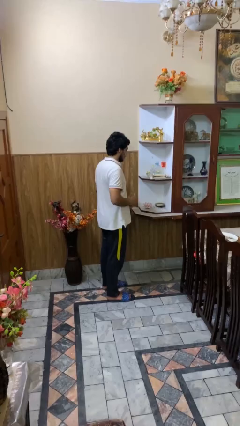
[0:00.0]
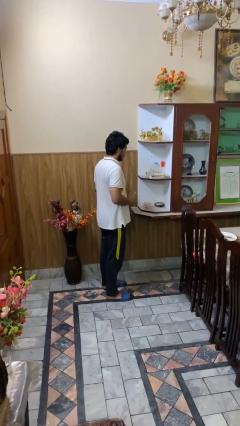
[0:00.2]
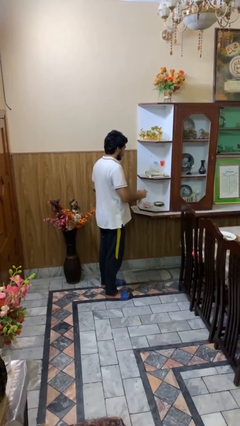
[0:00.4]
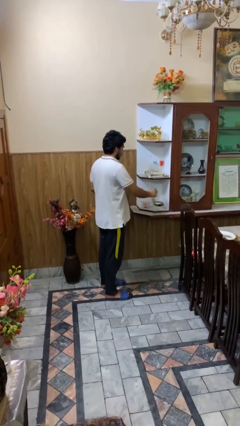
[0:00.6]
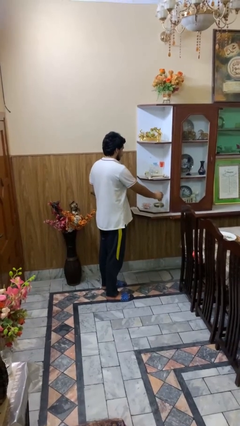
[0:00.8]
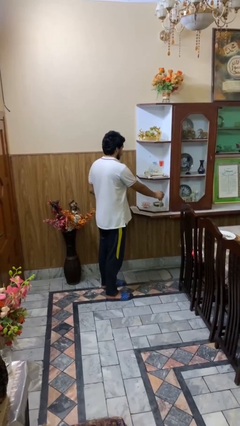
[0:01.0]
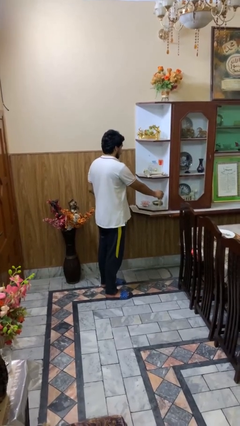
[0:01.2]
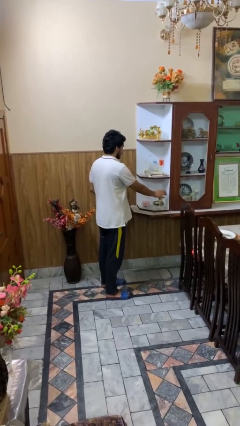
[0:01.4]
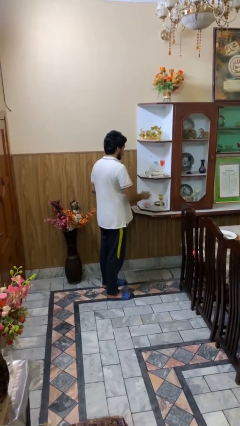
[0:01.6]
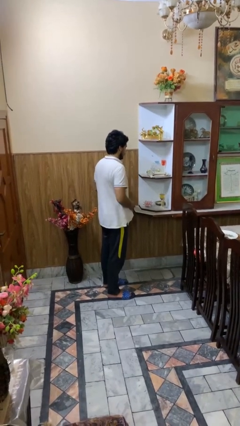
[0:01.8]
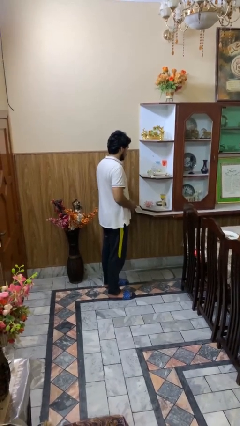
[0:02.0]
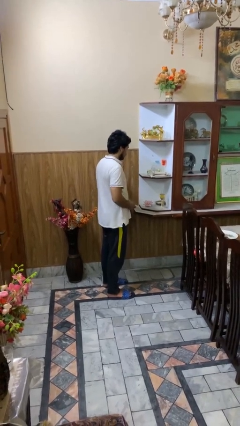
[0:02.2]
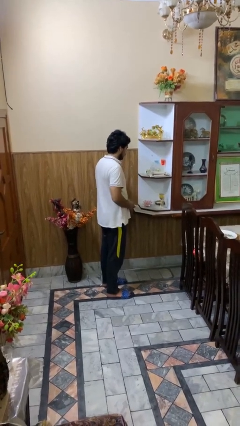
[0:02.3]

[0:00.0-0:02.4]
person puts down object into cabinet

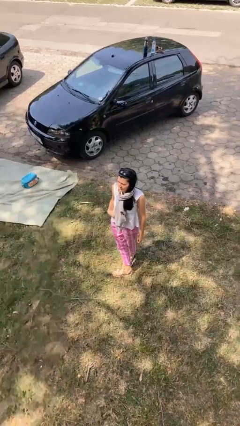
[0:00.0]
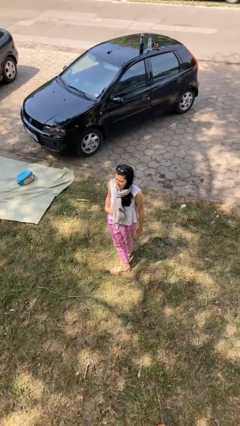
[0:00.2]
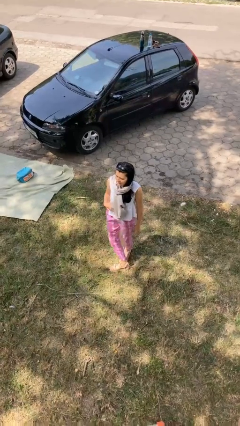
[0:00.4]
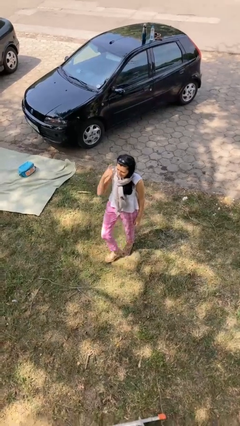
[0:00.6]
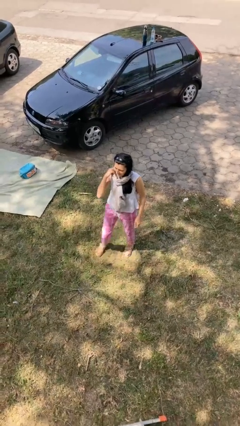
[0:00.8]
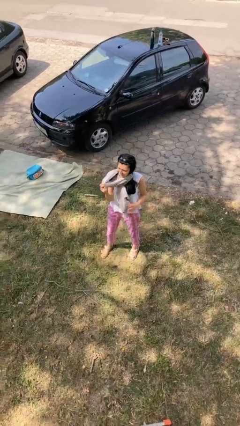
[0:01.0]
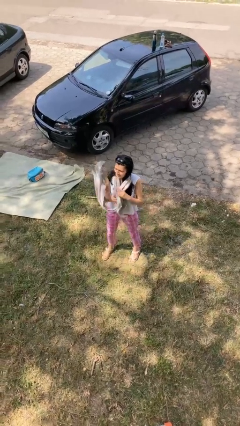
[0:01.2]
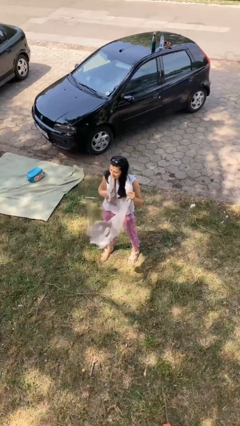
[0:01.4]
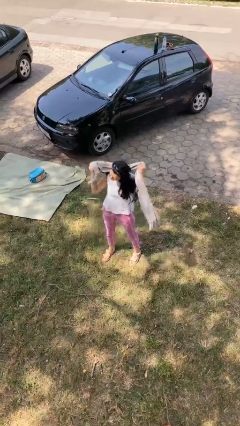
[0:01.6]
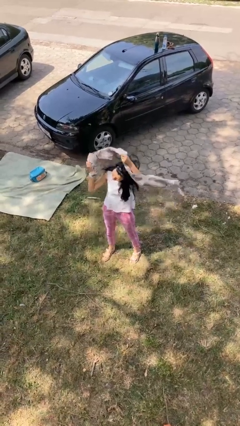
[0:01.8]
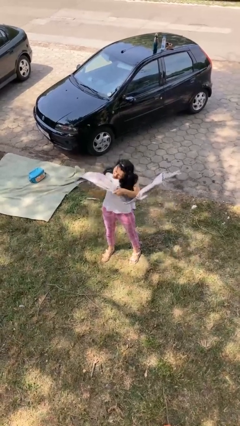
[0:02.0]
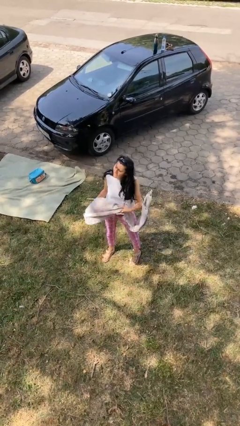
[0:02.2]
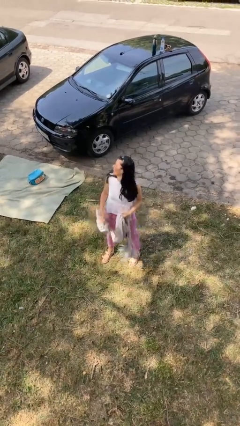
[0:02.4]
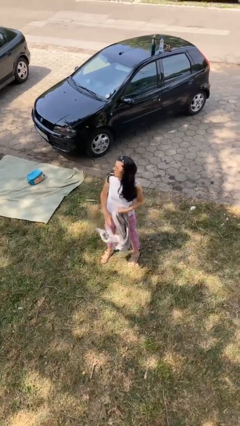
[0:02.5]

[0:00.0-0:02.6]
person takes off scarf

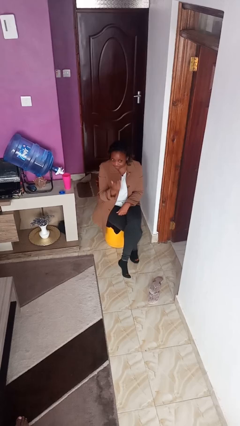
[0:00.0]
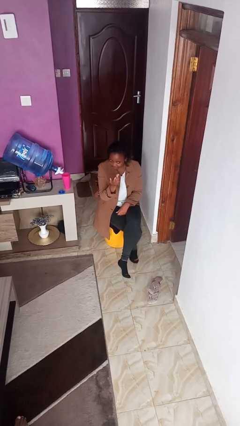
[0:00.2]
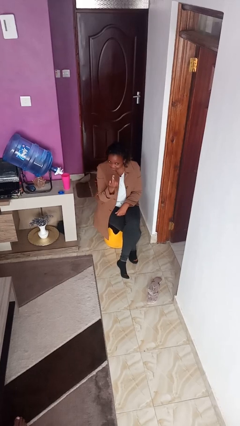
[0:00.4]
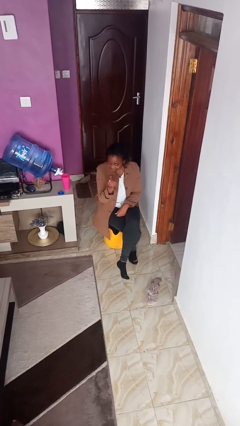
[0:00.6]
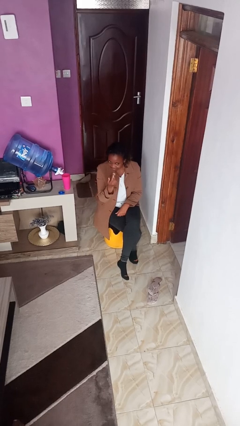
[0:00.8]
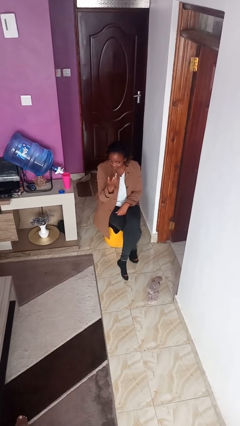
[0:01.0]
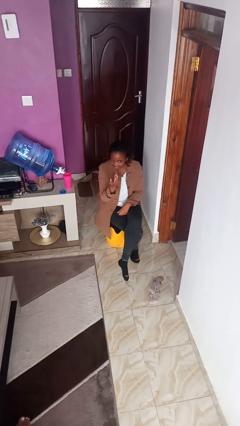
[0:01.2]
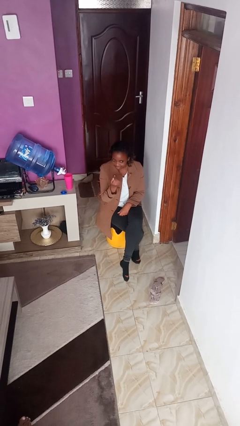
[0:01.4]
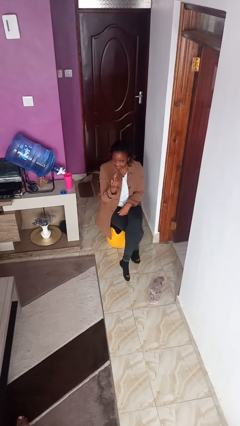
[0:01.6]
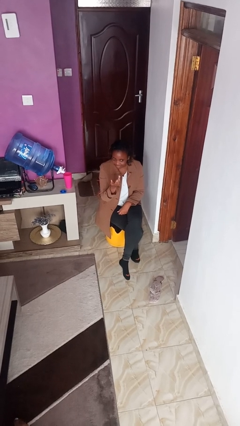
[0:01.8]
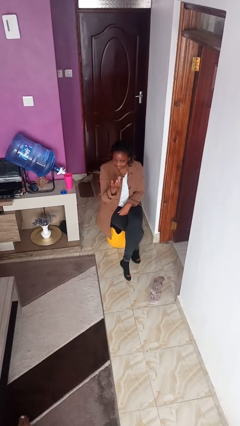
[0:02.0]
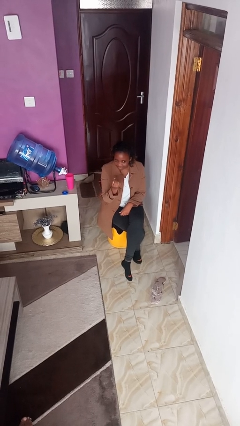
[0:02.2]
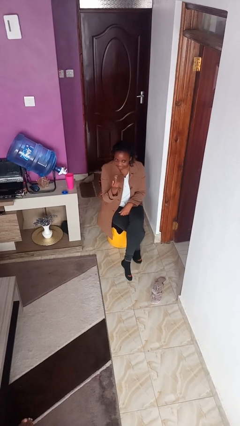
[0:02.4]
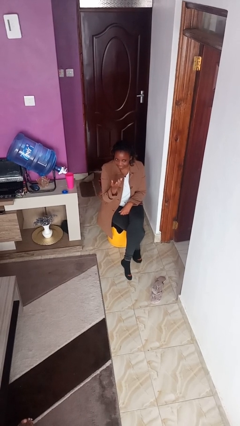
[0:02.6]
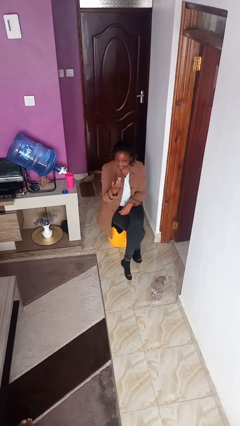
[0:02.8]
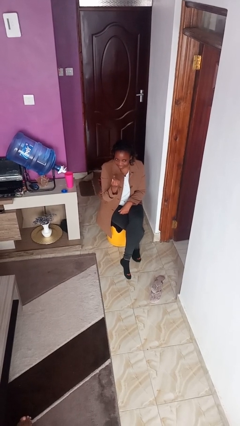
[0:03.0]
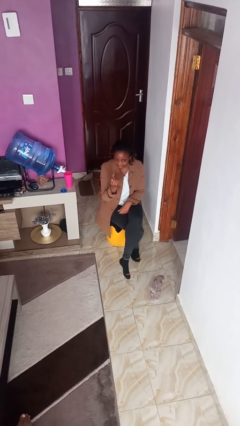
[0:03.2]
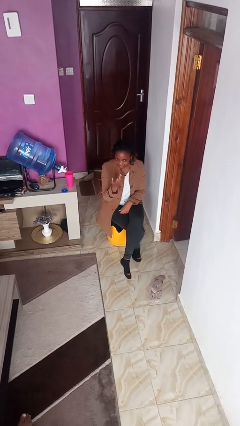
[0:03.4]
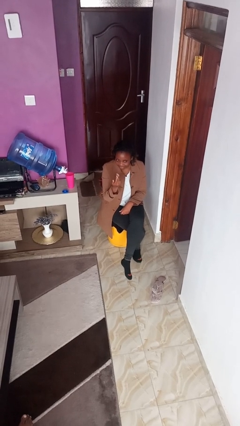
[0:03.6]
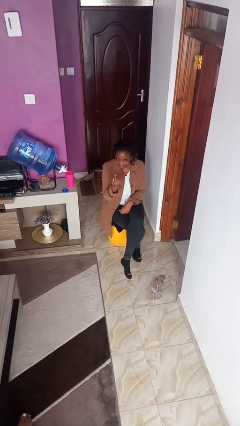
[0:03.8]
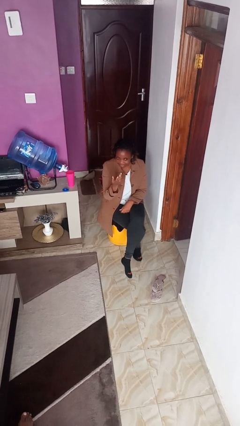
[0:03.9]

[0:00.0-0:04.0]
person gestures come here

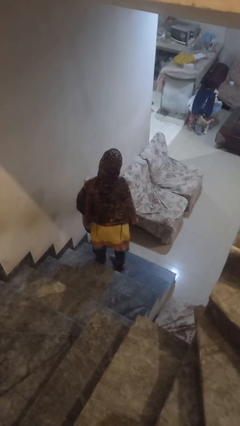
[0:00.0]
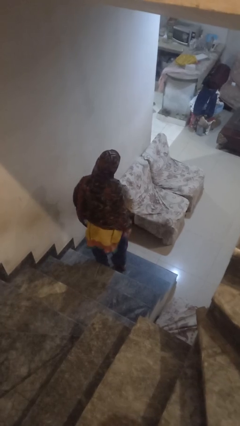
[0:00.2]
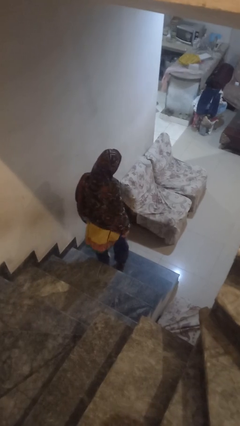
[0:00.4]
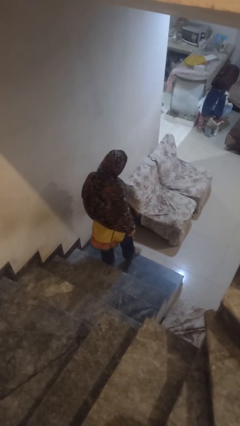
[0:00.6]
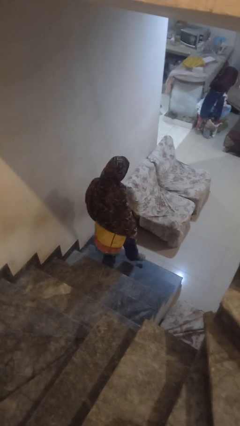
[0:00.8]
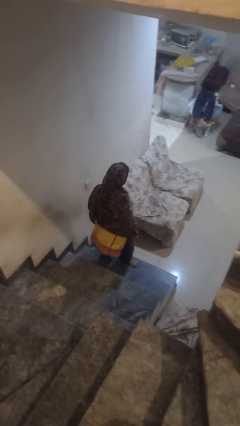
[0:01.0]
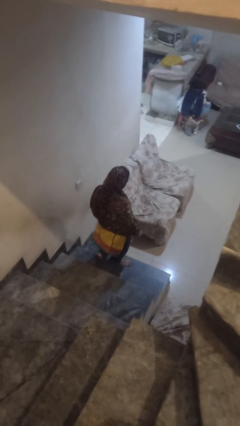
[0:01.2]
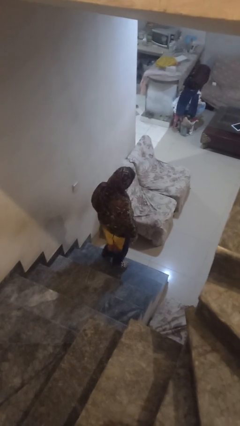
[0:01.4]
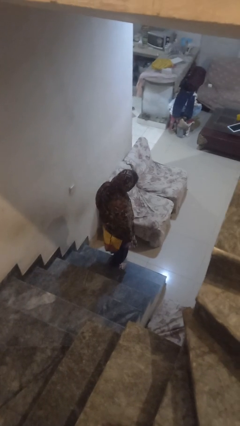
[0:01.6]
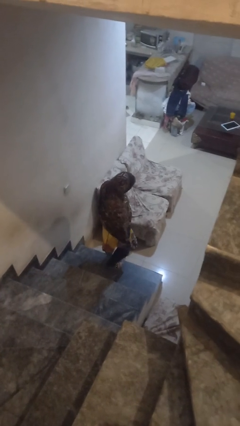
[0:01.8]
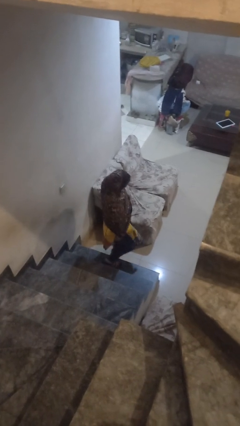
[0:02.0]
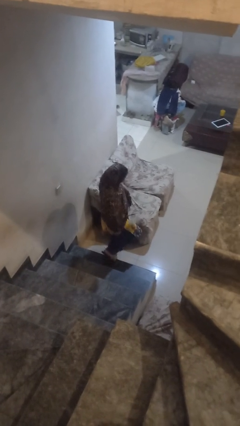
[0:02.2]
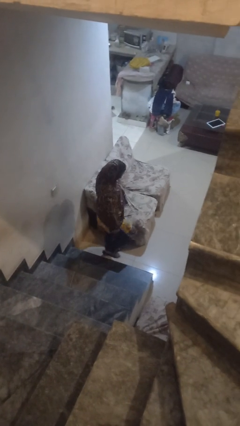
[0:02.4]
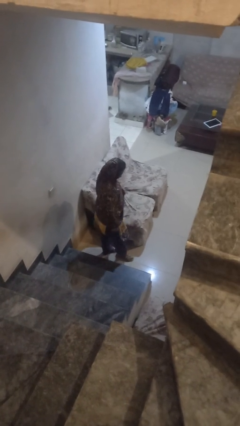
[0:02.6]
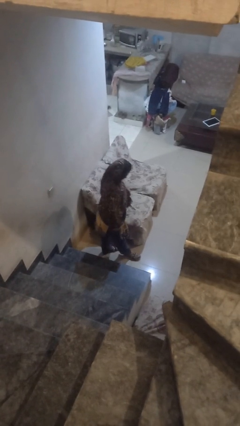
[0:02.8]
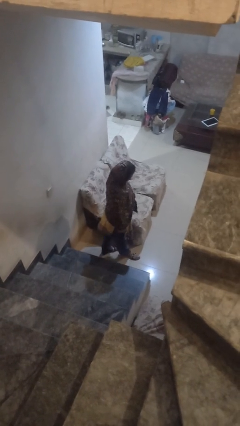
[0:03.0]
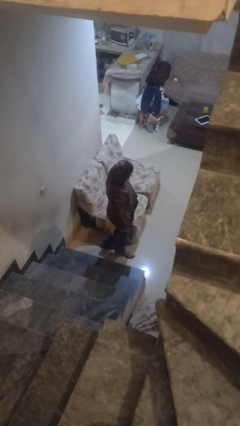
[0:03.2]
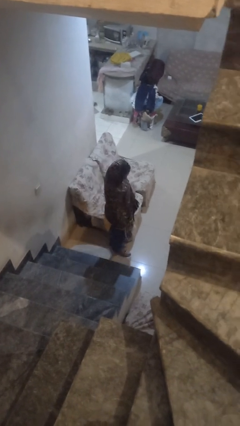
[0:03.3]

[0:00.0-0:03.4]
person climbs down stairs

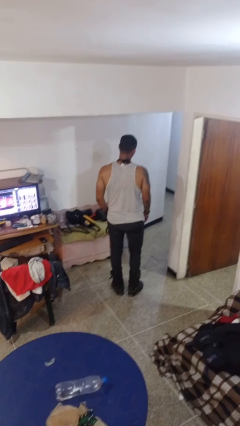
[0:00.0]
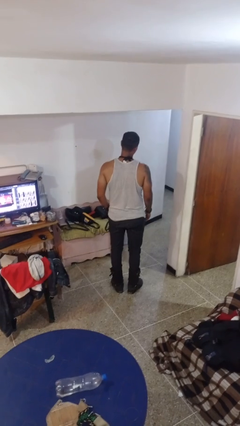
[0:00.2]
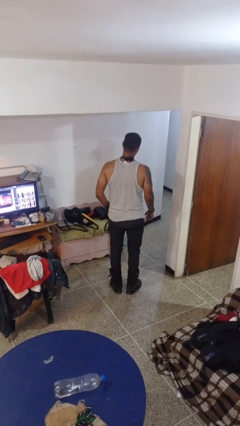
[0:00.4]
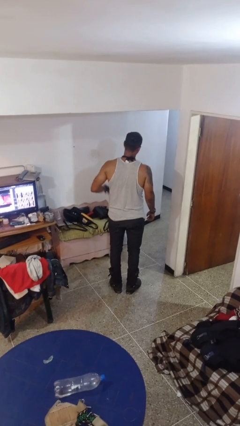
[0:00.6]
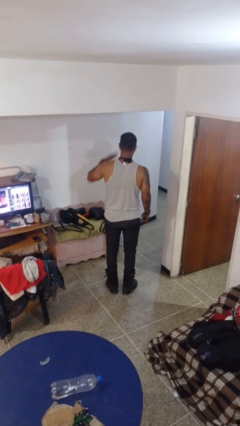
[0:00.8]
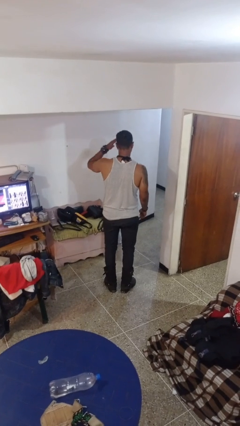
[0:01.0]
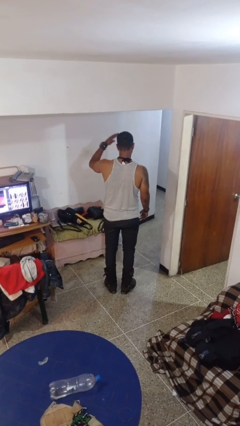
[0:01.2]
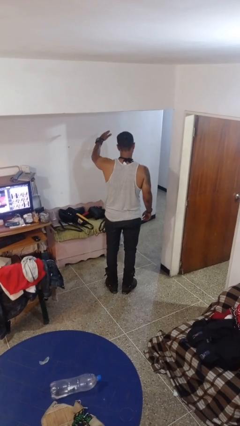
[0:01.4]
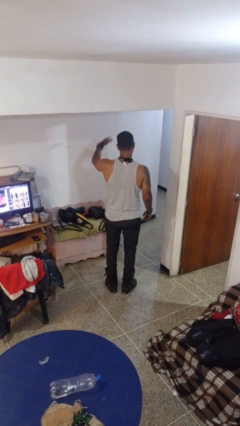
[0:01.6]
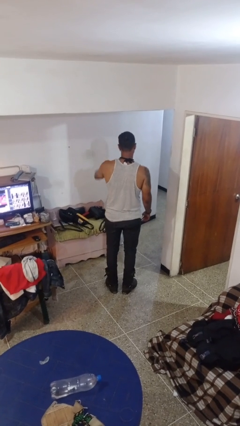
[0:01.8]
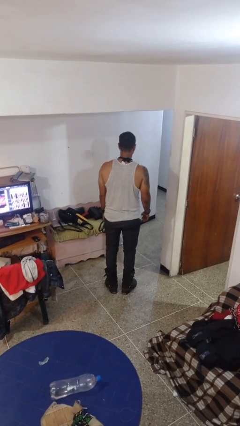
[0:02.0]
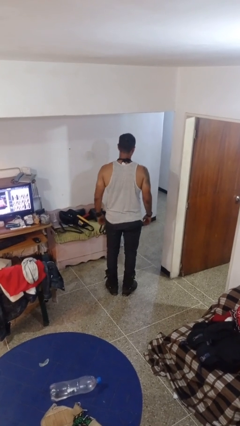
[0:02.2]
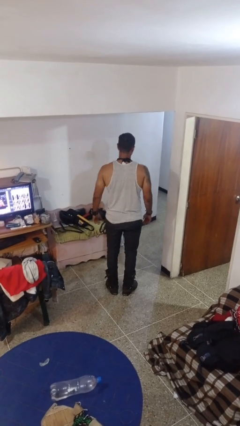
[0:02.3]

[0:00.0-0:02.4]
person salutes

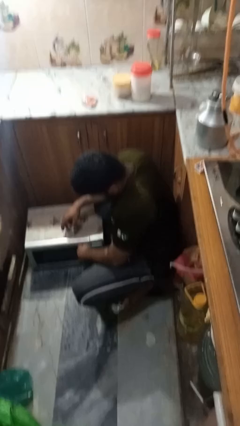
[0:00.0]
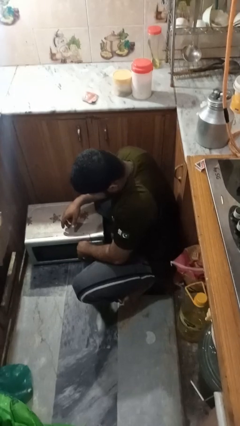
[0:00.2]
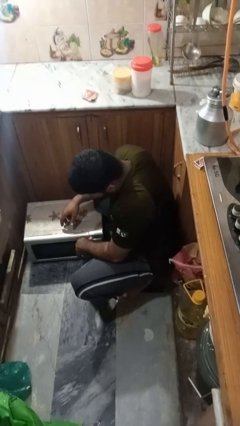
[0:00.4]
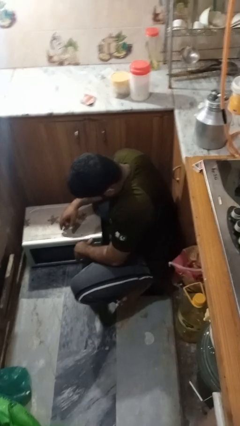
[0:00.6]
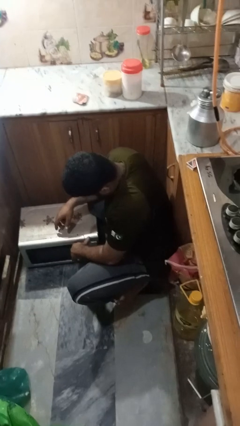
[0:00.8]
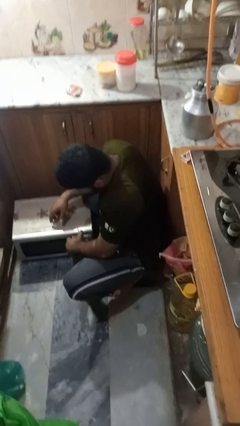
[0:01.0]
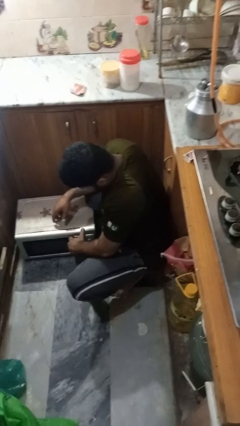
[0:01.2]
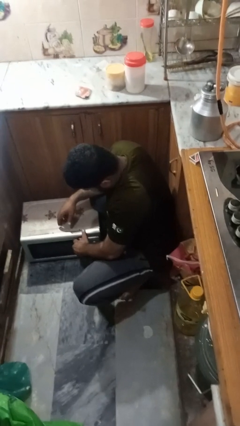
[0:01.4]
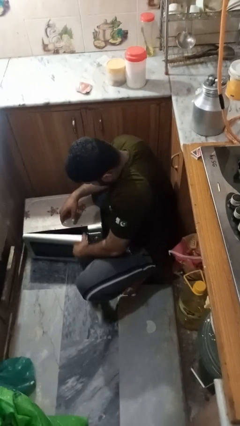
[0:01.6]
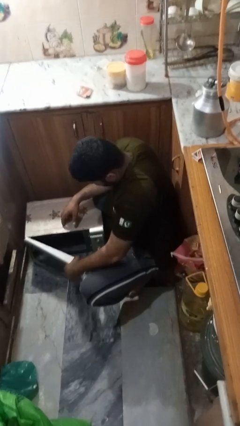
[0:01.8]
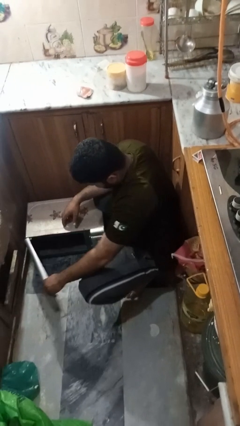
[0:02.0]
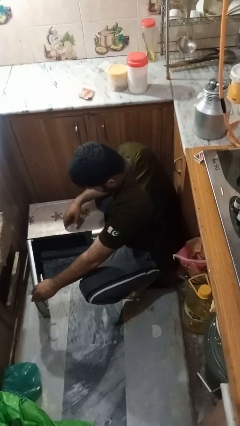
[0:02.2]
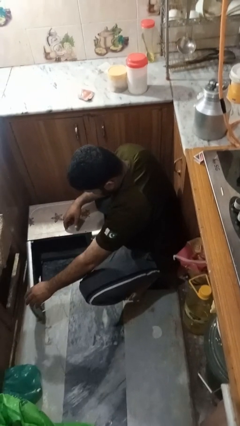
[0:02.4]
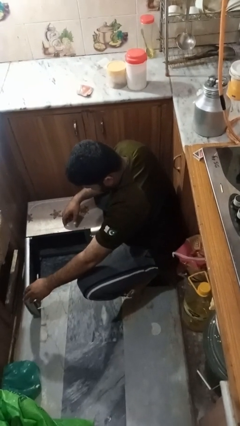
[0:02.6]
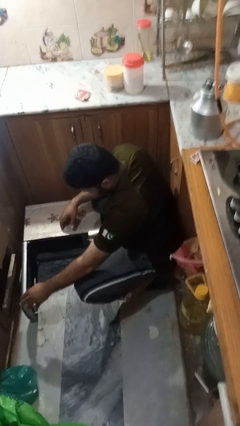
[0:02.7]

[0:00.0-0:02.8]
person opens oven door
